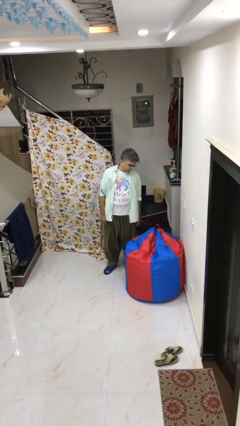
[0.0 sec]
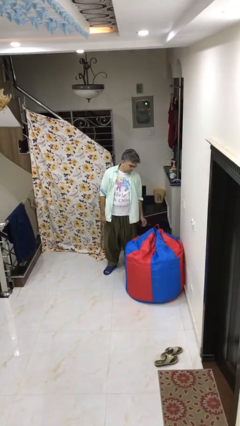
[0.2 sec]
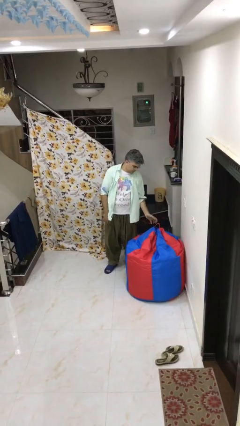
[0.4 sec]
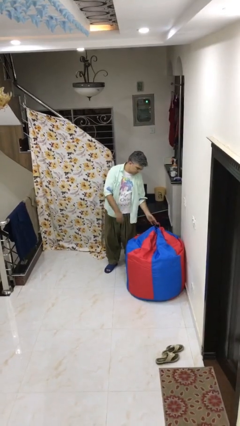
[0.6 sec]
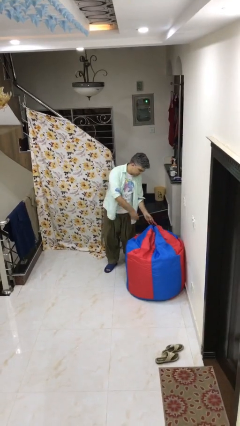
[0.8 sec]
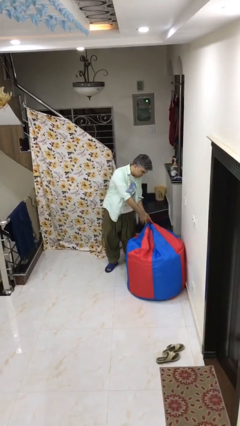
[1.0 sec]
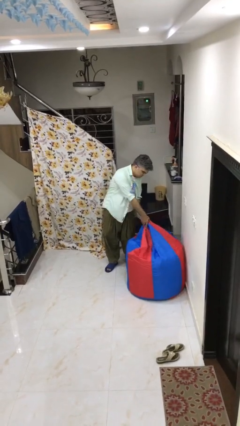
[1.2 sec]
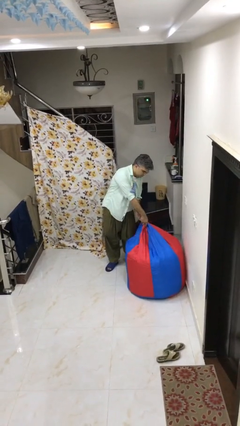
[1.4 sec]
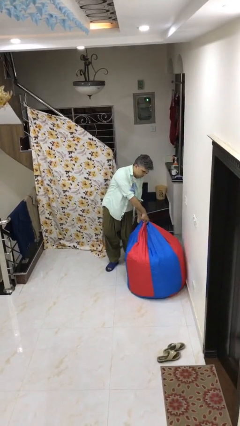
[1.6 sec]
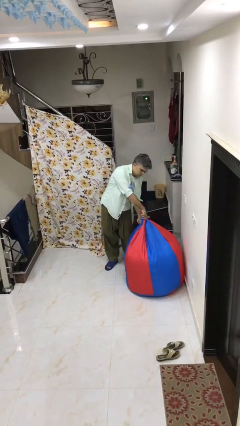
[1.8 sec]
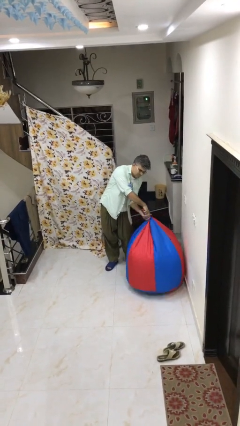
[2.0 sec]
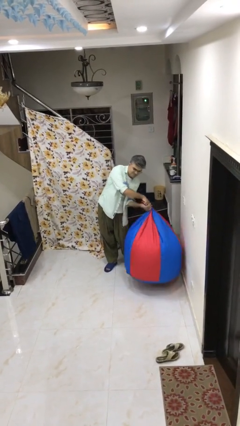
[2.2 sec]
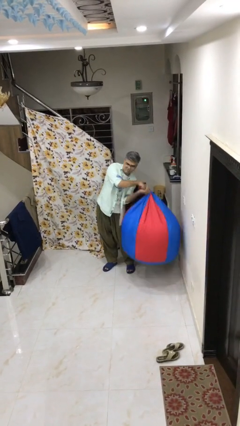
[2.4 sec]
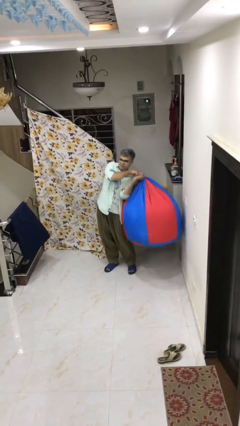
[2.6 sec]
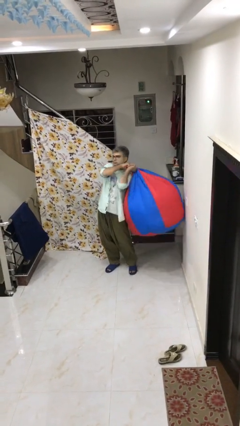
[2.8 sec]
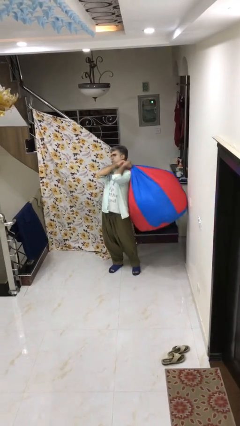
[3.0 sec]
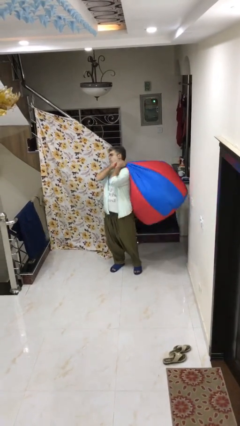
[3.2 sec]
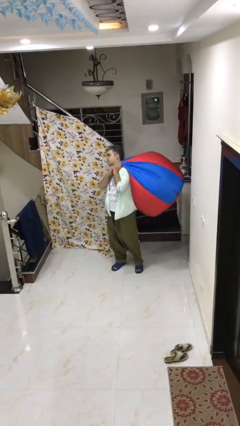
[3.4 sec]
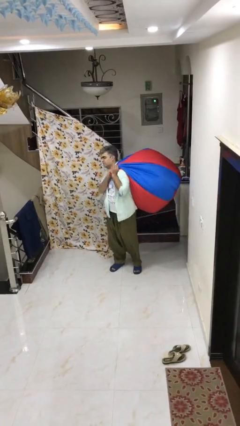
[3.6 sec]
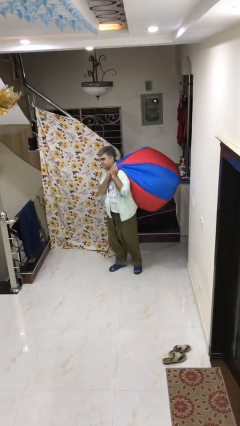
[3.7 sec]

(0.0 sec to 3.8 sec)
person picks up object from floor

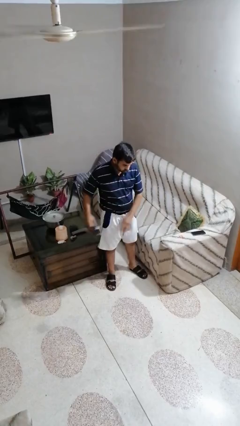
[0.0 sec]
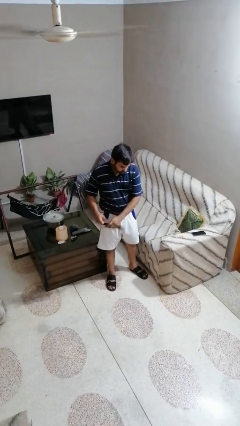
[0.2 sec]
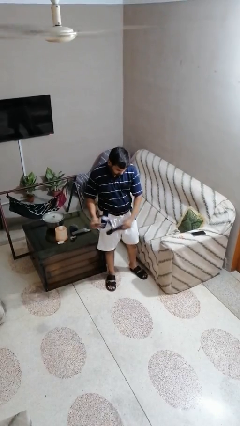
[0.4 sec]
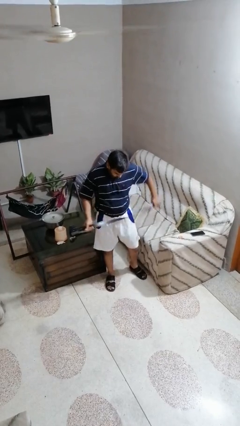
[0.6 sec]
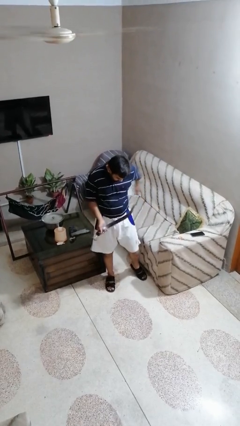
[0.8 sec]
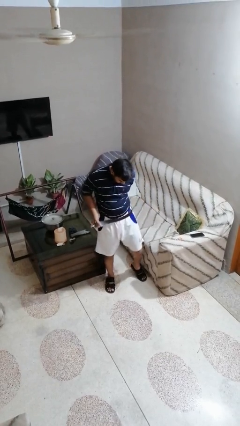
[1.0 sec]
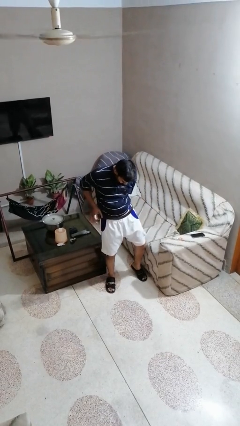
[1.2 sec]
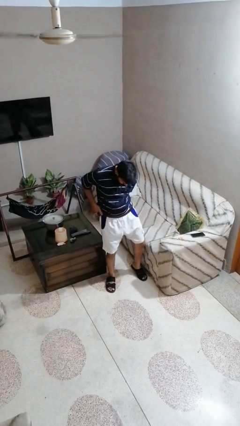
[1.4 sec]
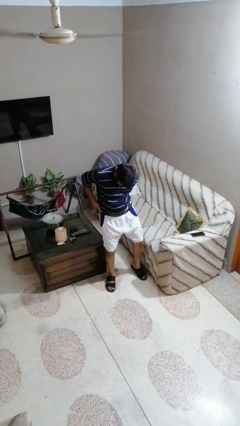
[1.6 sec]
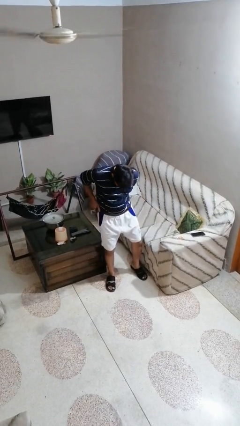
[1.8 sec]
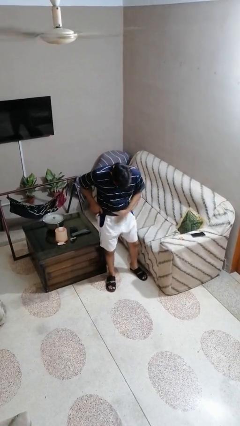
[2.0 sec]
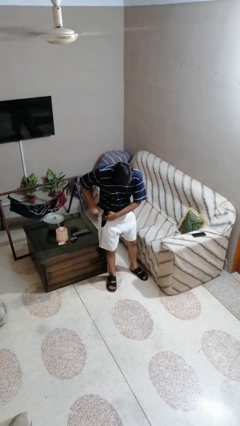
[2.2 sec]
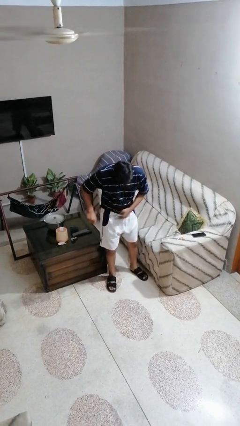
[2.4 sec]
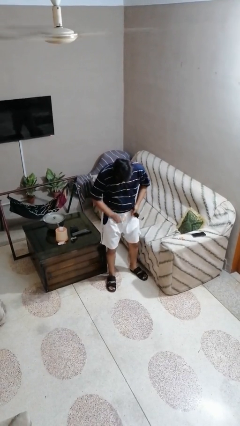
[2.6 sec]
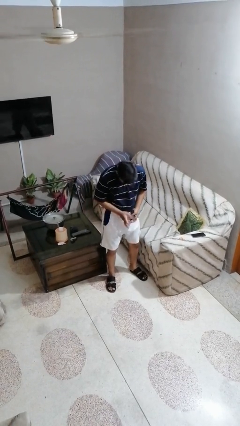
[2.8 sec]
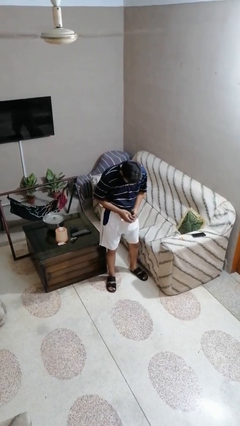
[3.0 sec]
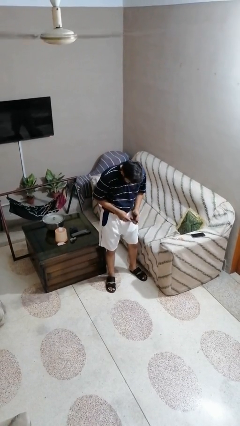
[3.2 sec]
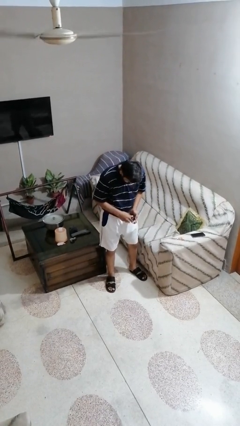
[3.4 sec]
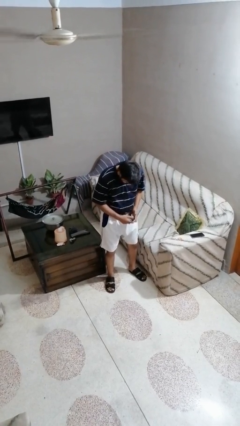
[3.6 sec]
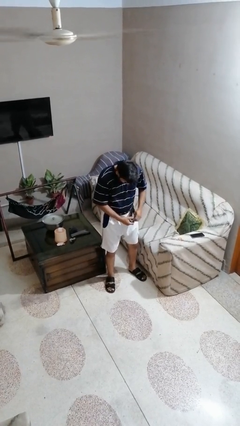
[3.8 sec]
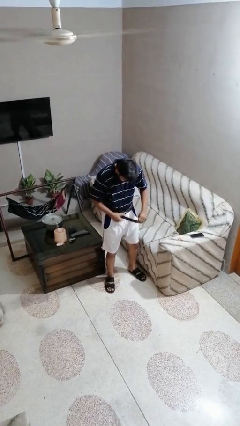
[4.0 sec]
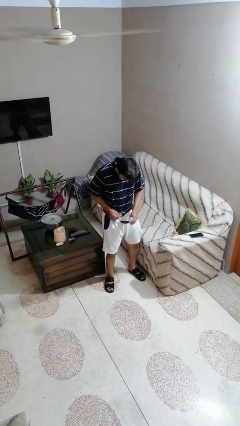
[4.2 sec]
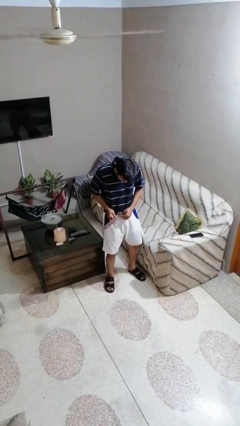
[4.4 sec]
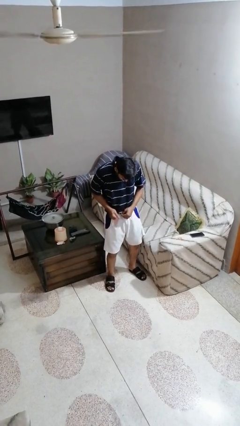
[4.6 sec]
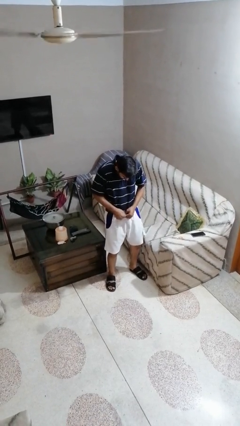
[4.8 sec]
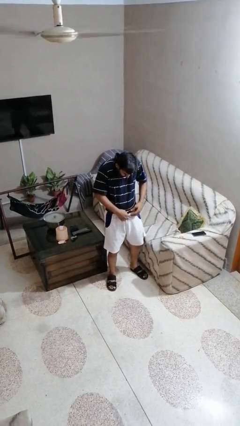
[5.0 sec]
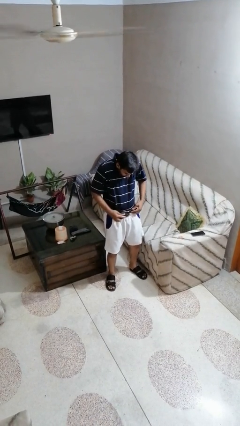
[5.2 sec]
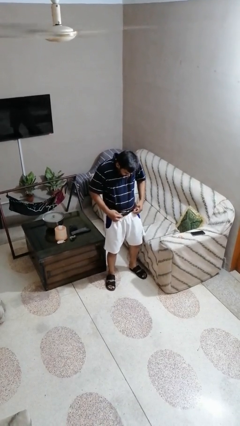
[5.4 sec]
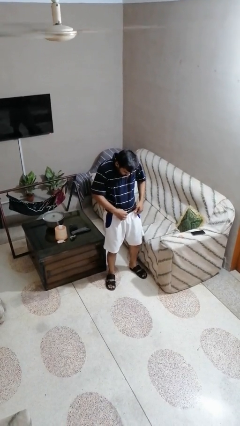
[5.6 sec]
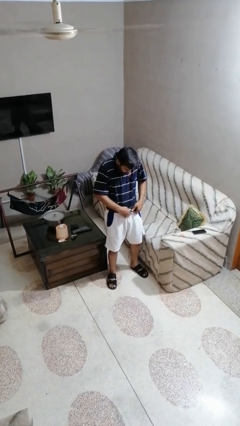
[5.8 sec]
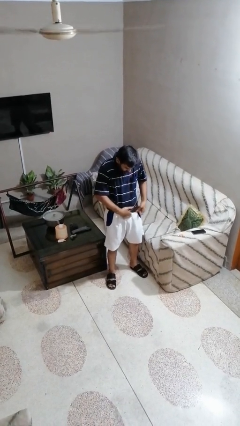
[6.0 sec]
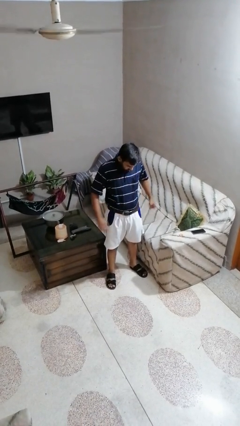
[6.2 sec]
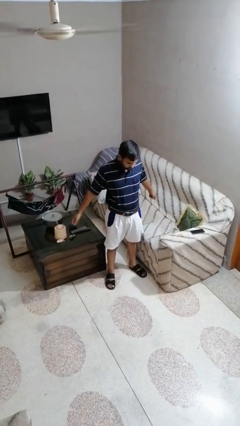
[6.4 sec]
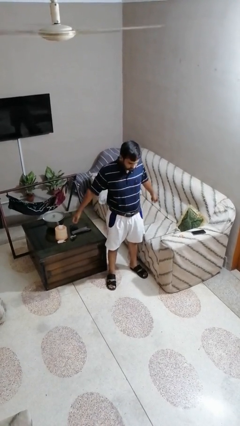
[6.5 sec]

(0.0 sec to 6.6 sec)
person puts on belt

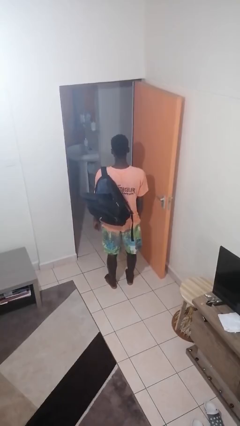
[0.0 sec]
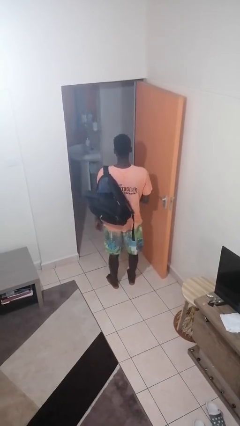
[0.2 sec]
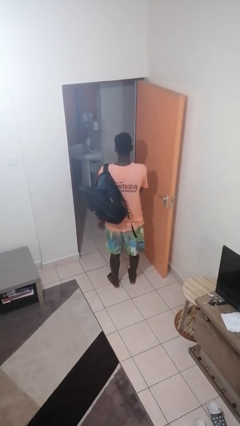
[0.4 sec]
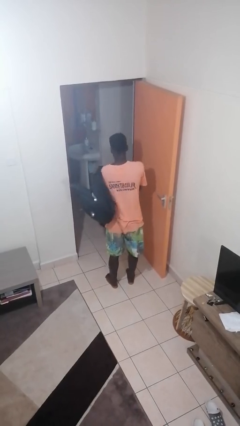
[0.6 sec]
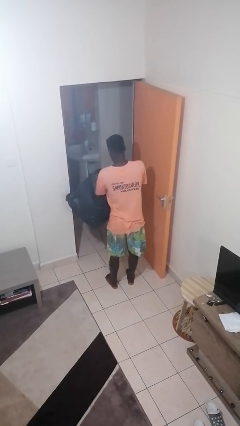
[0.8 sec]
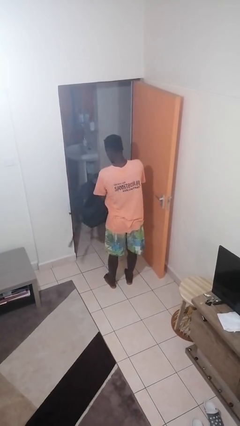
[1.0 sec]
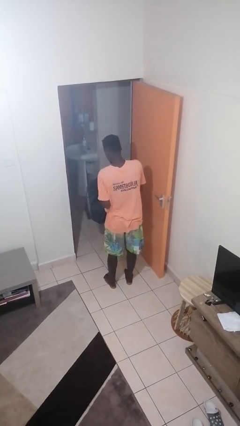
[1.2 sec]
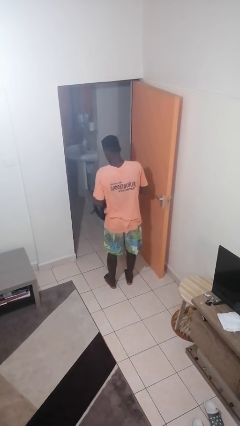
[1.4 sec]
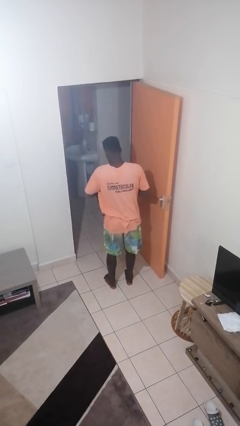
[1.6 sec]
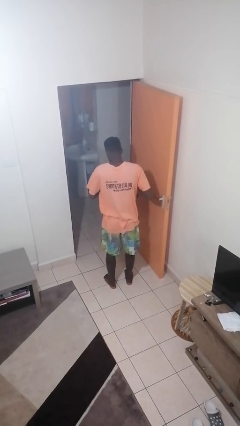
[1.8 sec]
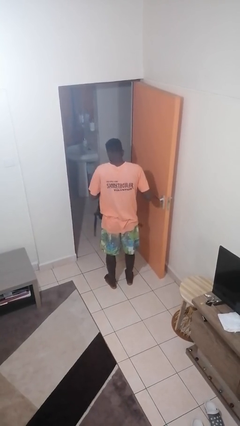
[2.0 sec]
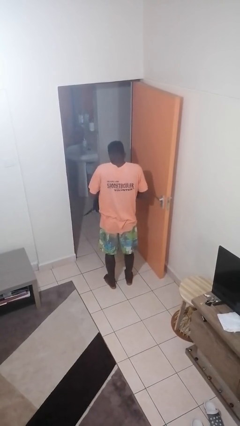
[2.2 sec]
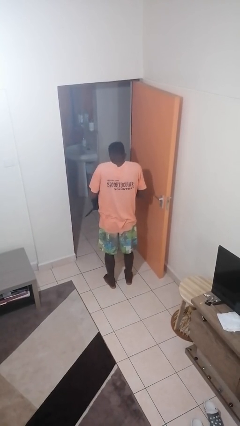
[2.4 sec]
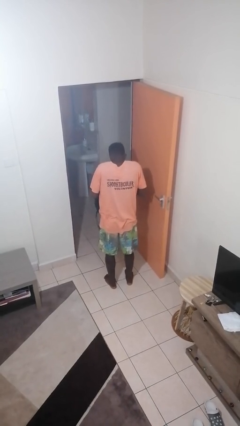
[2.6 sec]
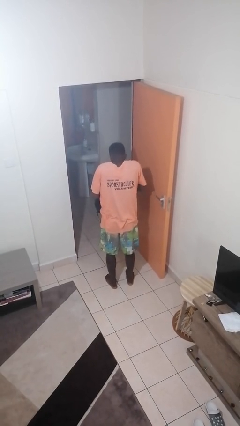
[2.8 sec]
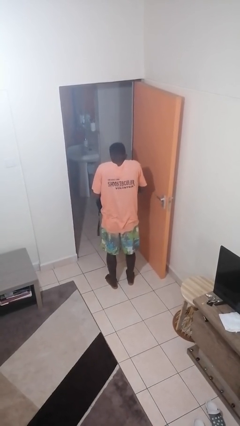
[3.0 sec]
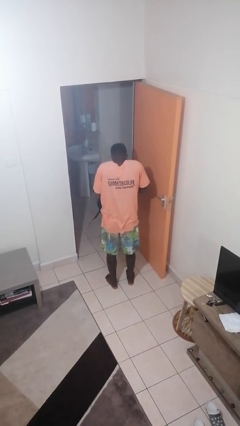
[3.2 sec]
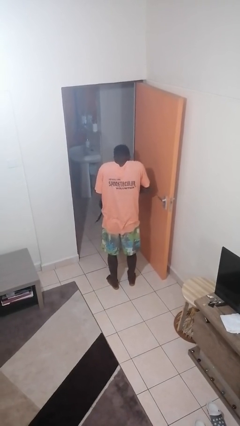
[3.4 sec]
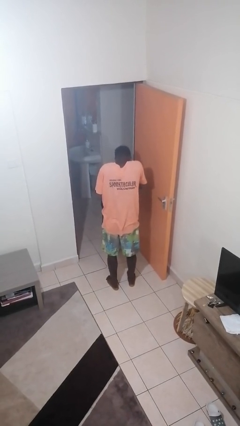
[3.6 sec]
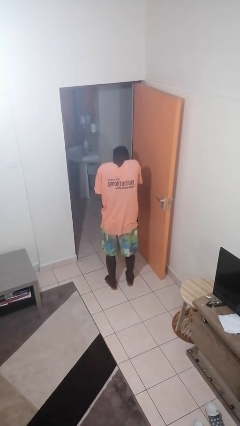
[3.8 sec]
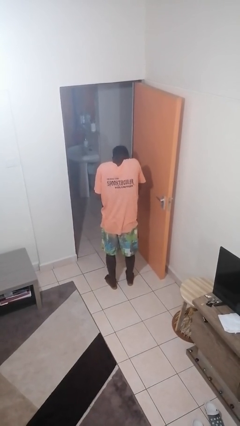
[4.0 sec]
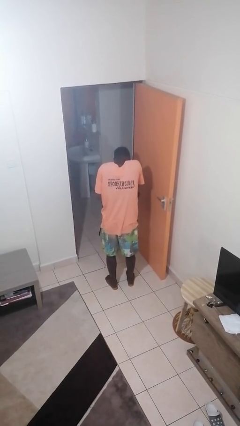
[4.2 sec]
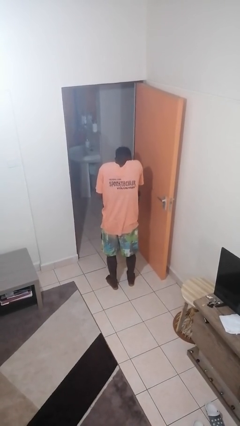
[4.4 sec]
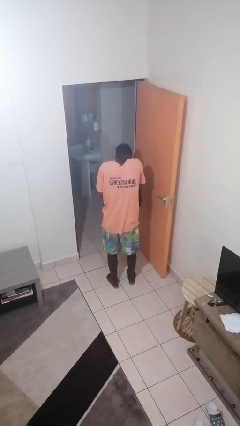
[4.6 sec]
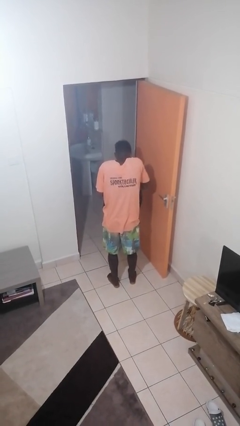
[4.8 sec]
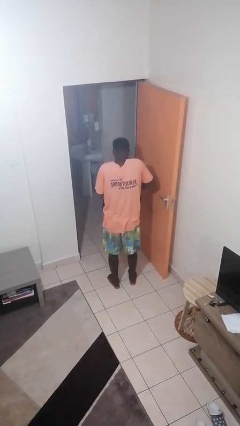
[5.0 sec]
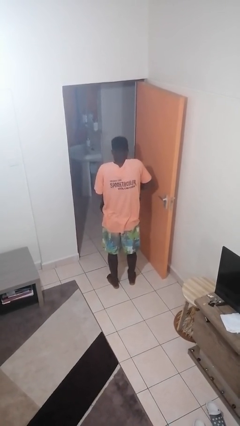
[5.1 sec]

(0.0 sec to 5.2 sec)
person searches in backpack

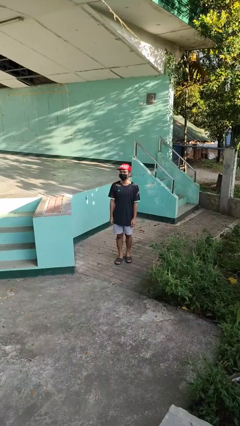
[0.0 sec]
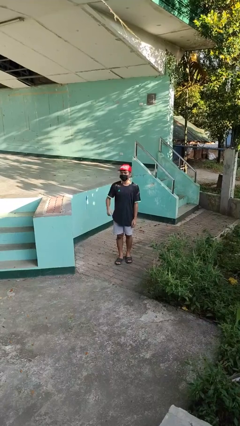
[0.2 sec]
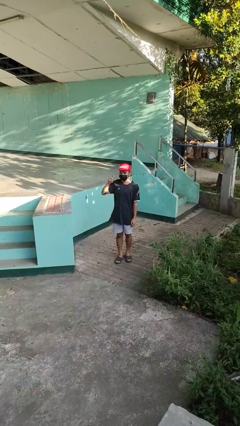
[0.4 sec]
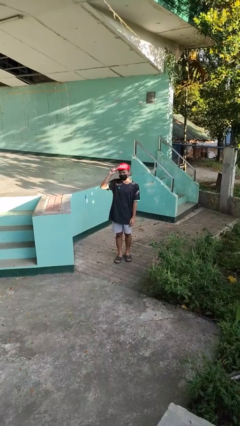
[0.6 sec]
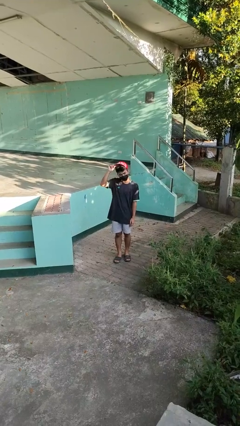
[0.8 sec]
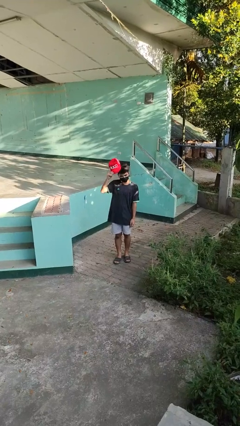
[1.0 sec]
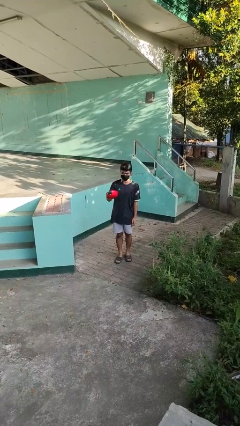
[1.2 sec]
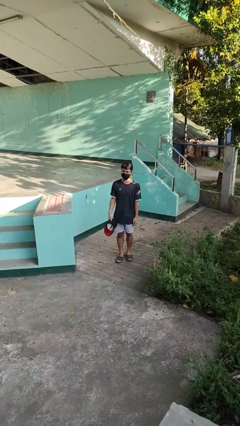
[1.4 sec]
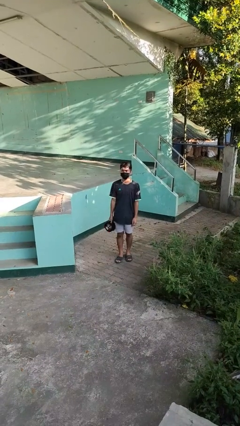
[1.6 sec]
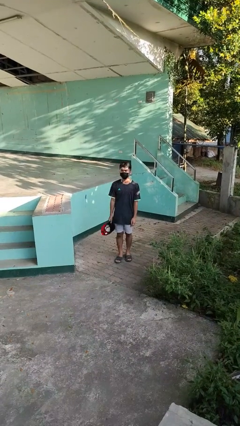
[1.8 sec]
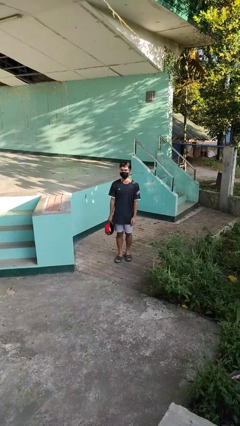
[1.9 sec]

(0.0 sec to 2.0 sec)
person takes off hat

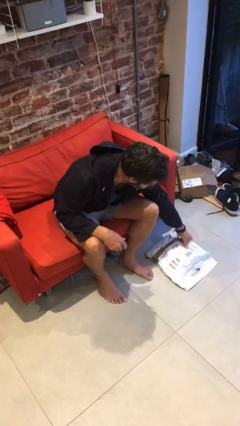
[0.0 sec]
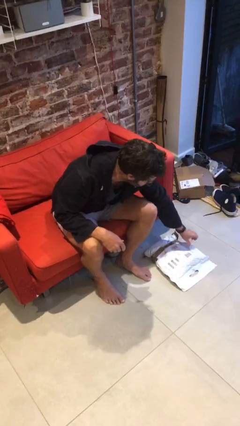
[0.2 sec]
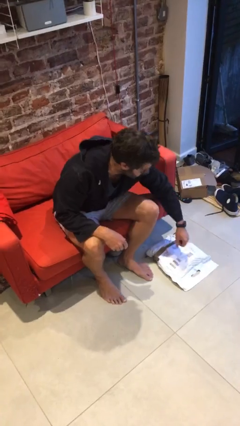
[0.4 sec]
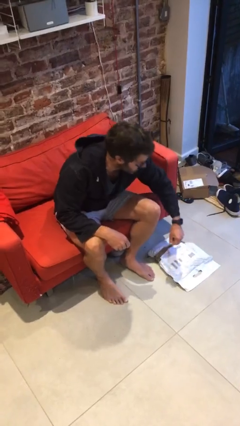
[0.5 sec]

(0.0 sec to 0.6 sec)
person puts down object on floor
